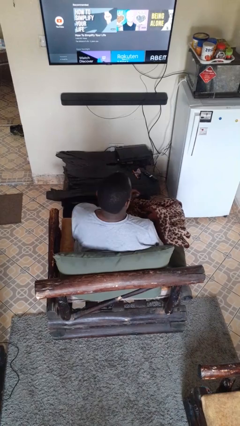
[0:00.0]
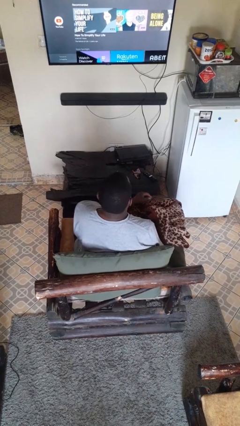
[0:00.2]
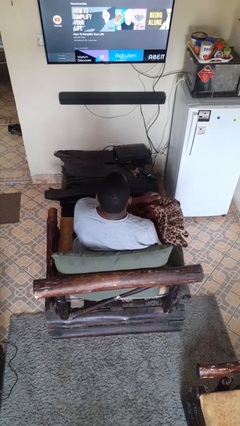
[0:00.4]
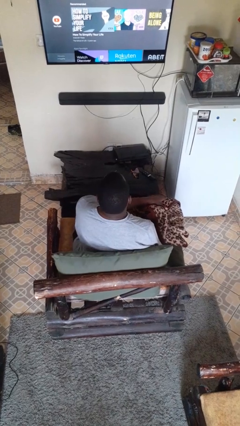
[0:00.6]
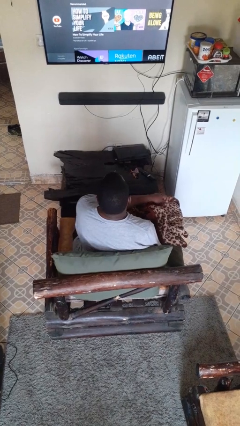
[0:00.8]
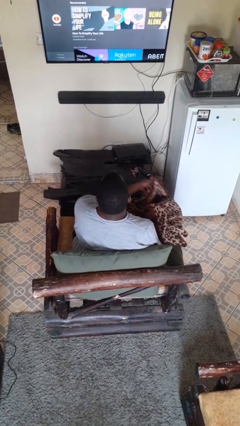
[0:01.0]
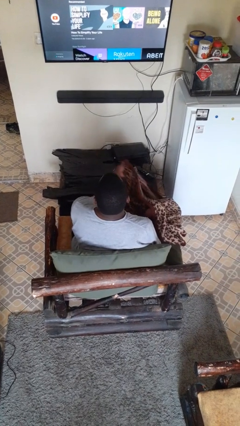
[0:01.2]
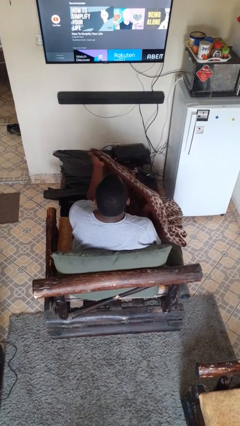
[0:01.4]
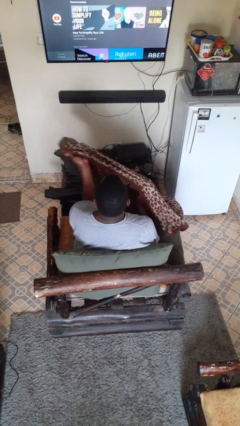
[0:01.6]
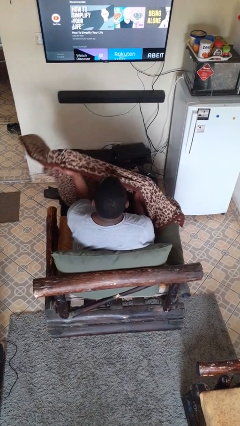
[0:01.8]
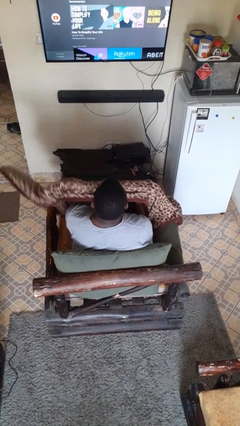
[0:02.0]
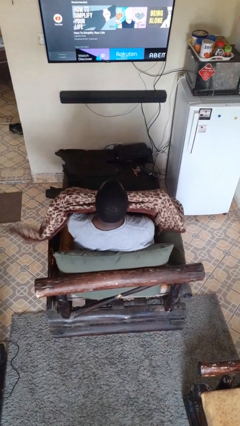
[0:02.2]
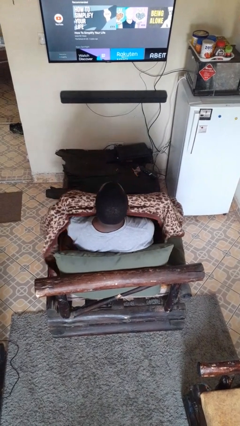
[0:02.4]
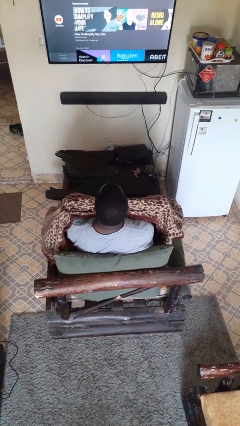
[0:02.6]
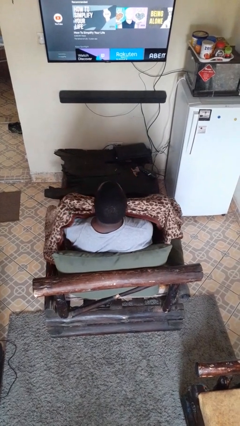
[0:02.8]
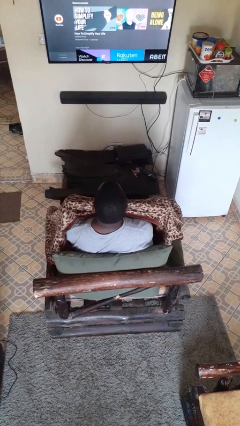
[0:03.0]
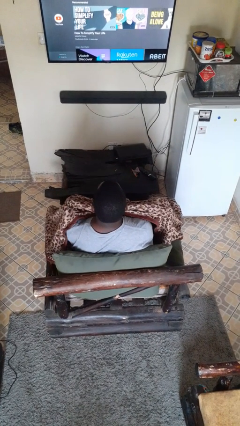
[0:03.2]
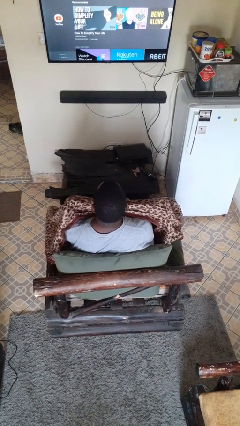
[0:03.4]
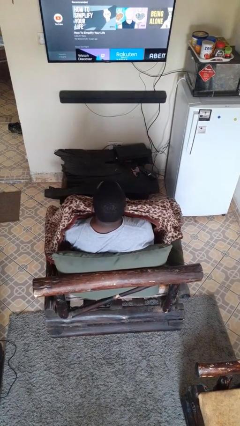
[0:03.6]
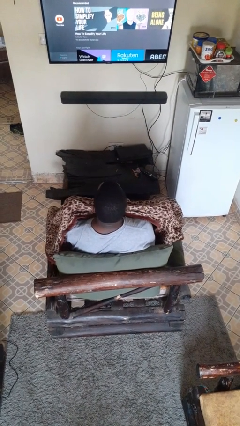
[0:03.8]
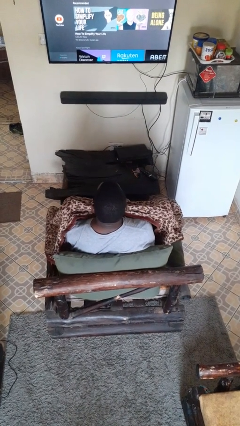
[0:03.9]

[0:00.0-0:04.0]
person covers with blanket

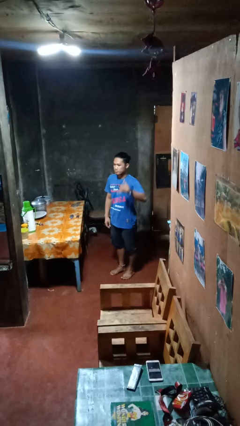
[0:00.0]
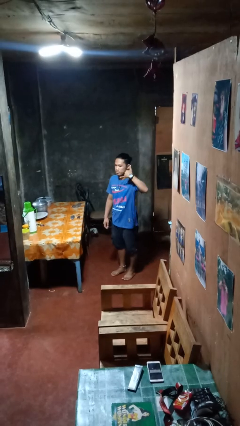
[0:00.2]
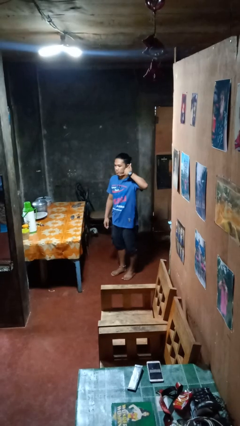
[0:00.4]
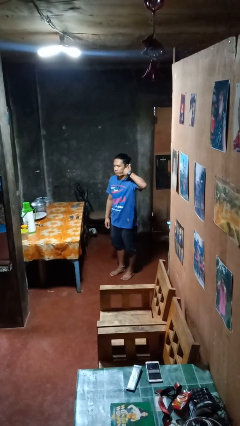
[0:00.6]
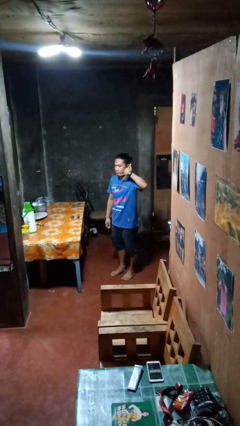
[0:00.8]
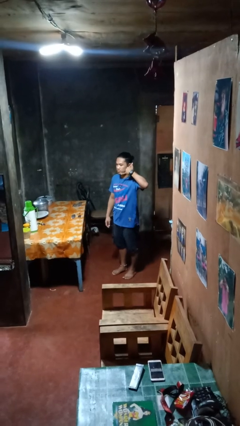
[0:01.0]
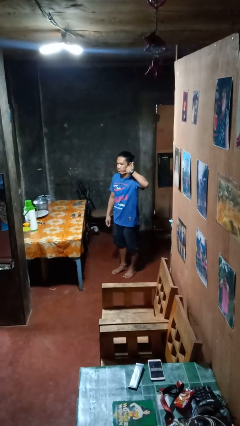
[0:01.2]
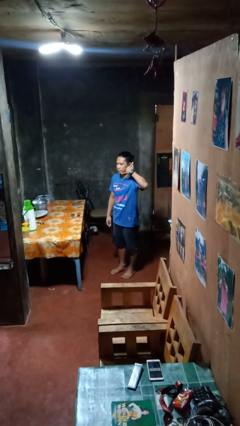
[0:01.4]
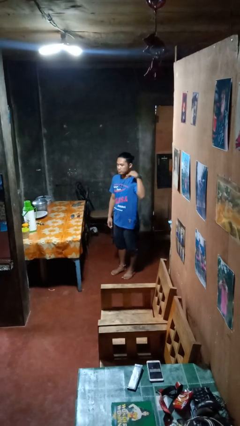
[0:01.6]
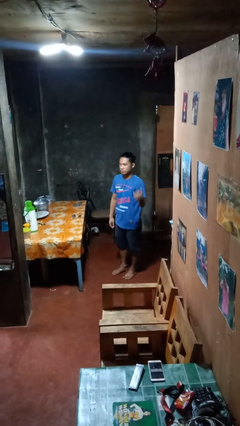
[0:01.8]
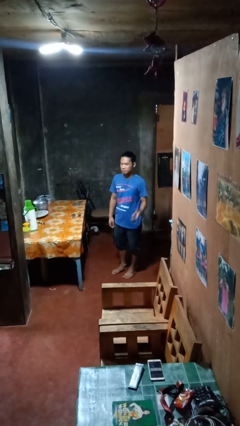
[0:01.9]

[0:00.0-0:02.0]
person gestures call me

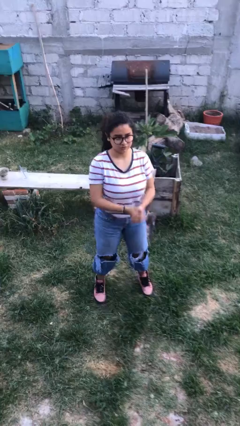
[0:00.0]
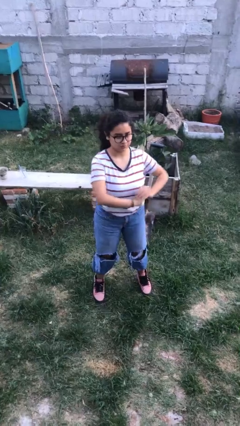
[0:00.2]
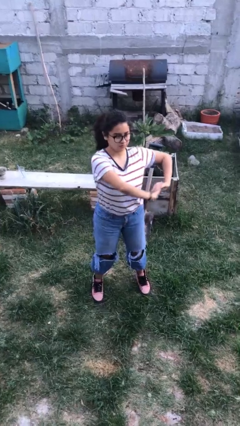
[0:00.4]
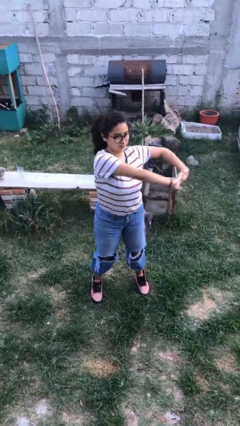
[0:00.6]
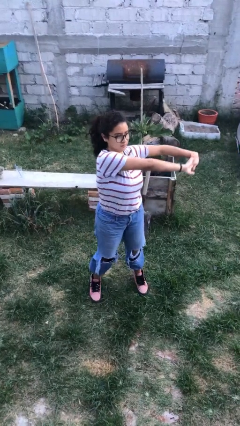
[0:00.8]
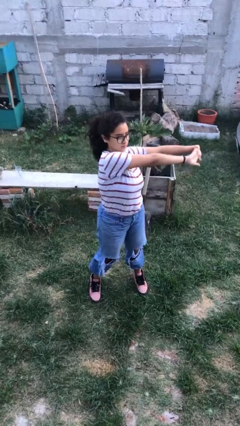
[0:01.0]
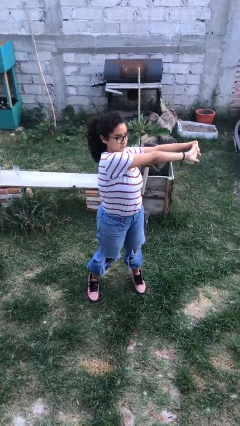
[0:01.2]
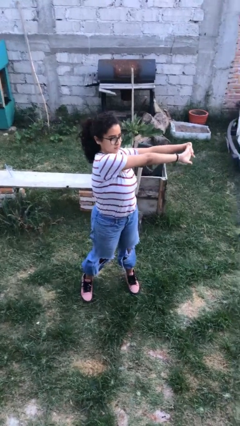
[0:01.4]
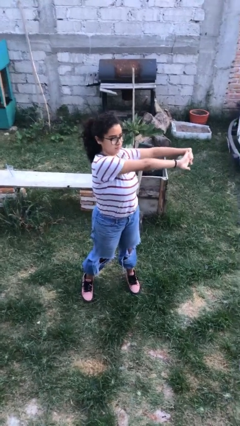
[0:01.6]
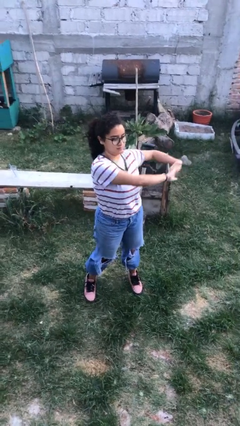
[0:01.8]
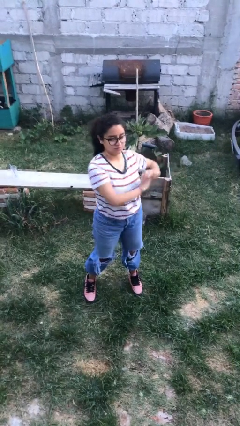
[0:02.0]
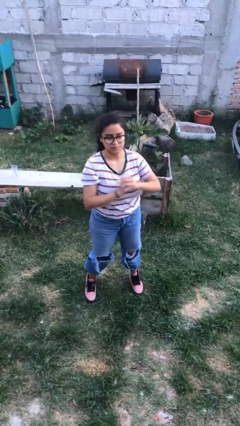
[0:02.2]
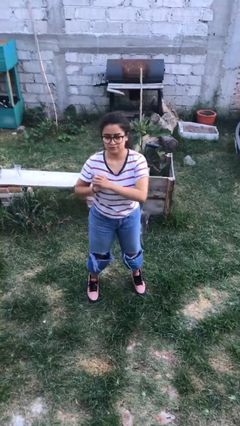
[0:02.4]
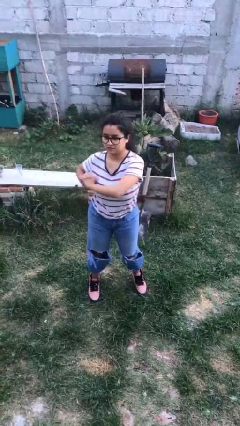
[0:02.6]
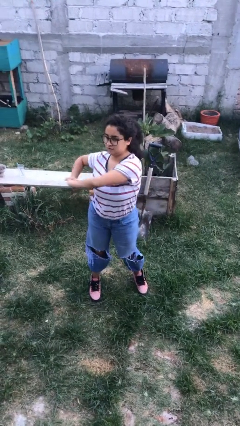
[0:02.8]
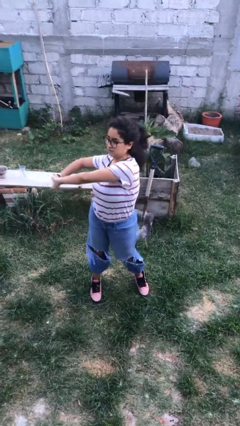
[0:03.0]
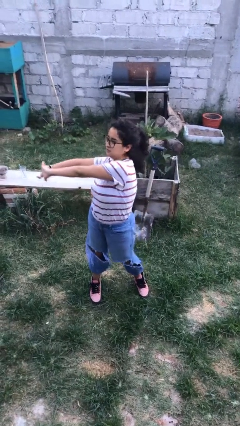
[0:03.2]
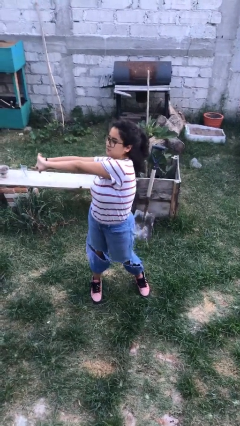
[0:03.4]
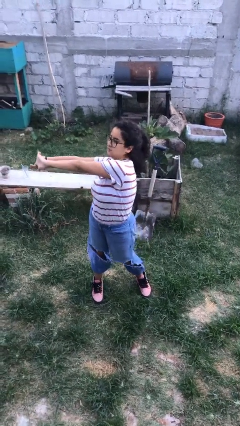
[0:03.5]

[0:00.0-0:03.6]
person stretches arms to side

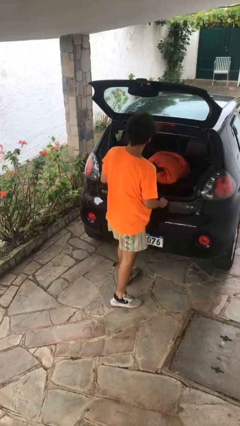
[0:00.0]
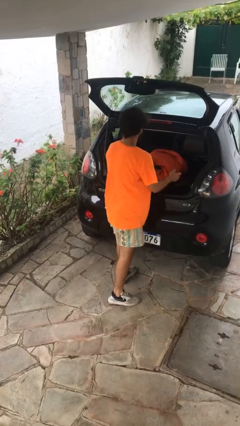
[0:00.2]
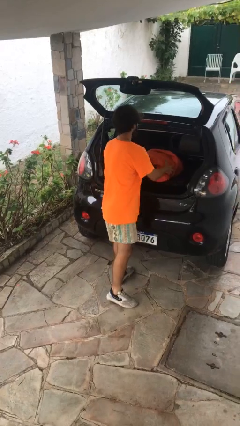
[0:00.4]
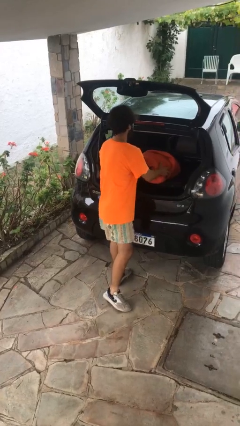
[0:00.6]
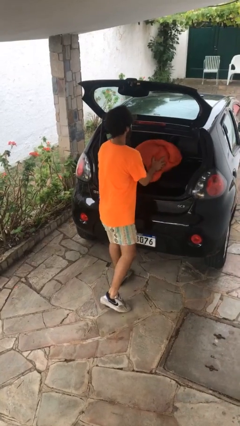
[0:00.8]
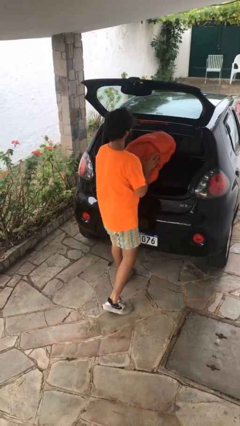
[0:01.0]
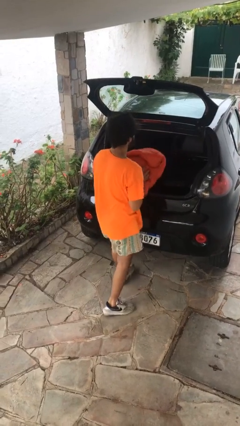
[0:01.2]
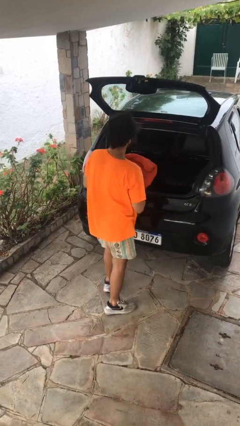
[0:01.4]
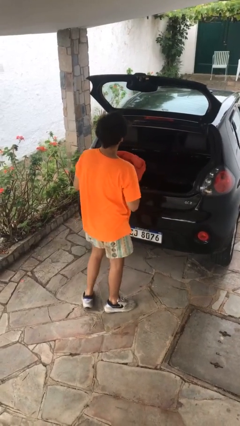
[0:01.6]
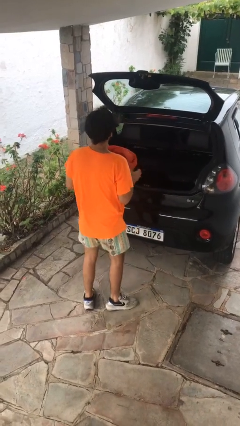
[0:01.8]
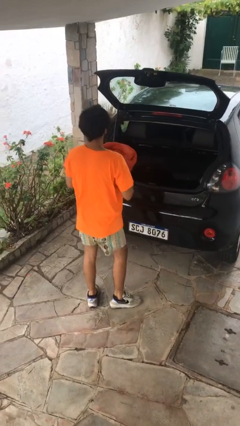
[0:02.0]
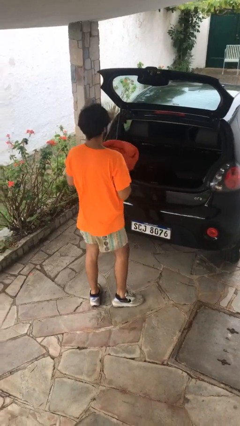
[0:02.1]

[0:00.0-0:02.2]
person unloads car

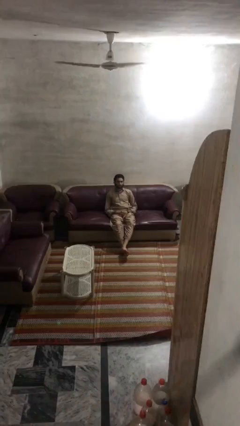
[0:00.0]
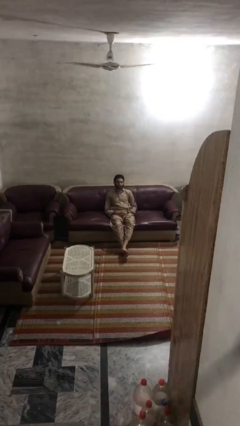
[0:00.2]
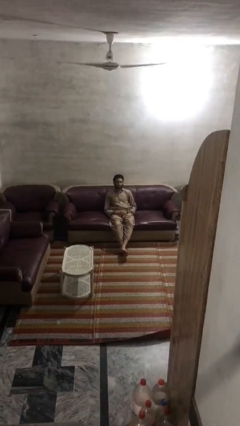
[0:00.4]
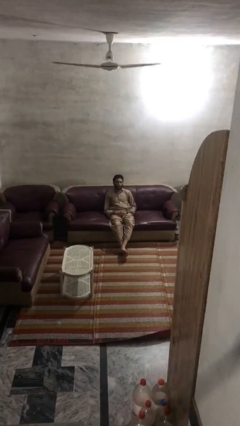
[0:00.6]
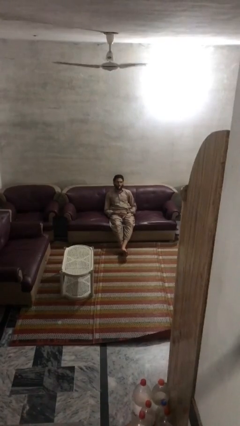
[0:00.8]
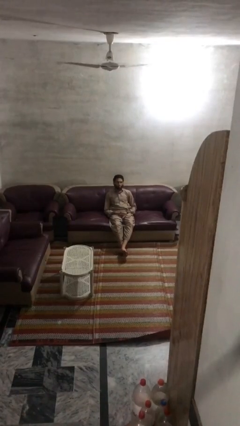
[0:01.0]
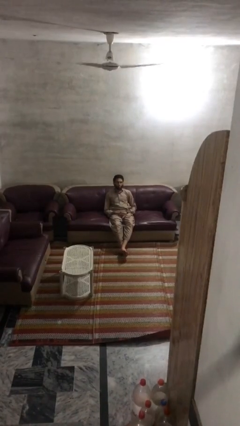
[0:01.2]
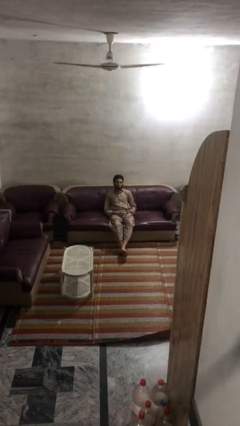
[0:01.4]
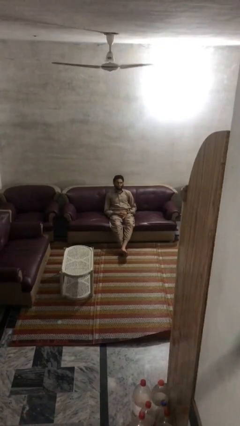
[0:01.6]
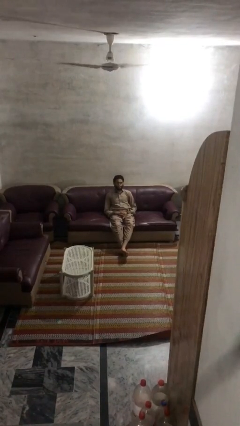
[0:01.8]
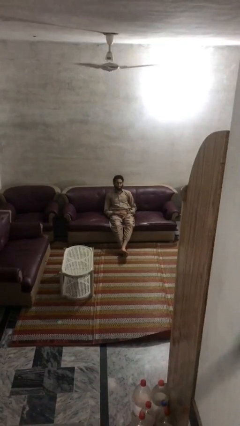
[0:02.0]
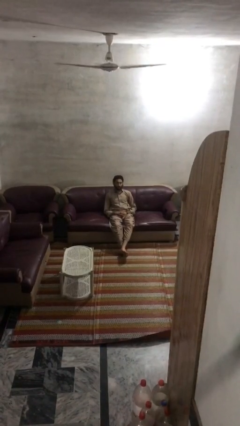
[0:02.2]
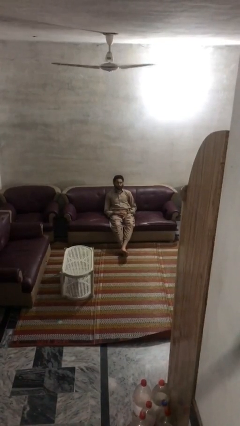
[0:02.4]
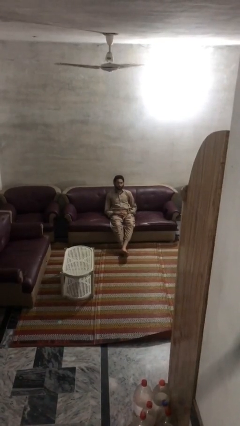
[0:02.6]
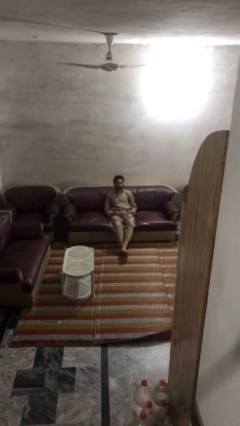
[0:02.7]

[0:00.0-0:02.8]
person sticks out tongue

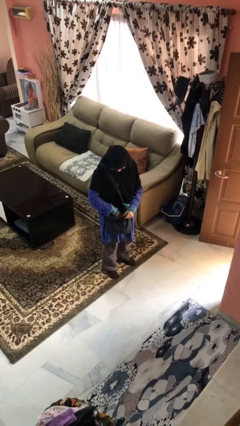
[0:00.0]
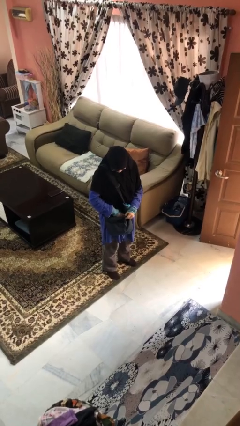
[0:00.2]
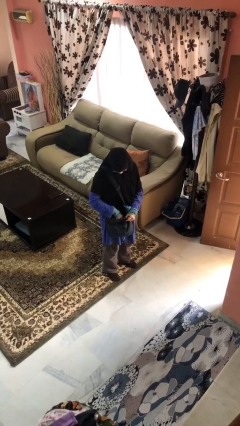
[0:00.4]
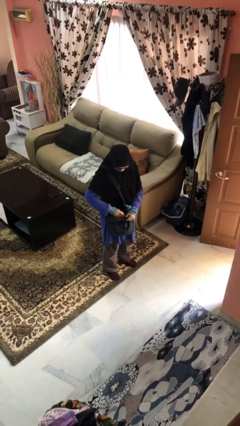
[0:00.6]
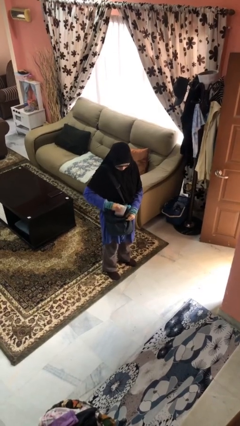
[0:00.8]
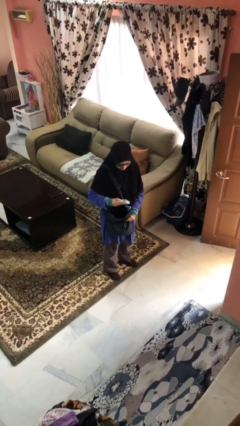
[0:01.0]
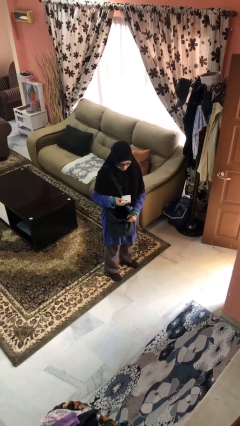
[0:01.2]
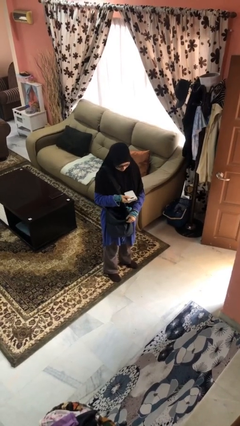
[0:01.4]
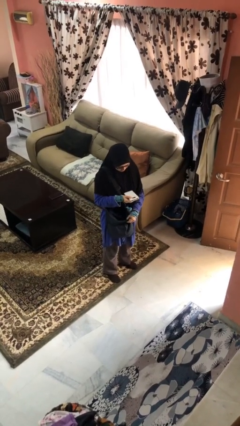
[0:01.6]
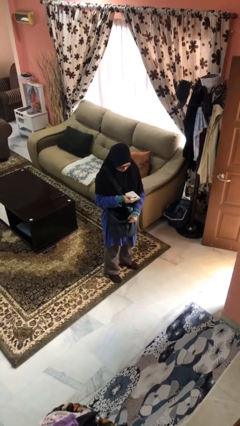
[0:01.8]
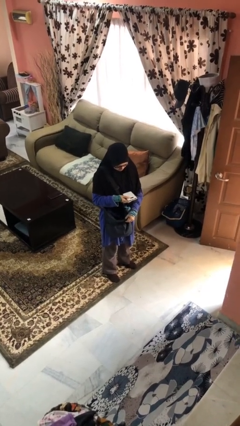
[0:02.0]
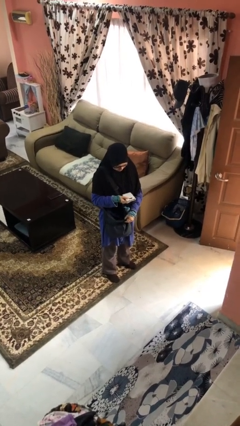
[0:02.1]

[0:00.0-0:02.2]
person takes object from purse

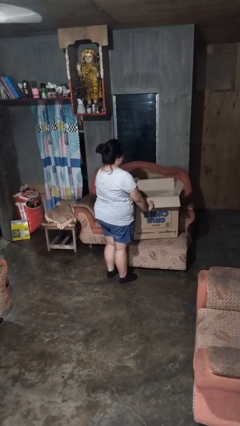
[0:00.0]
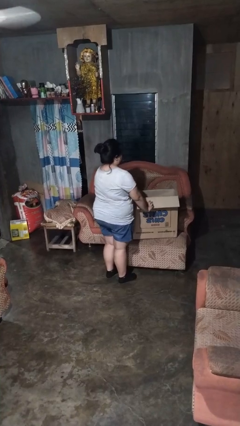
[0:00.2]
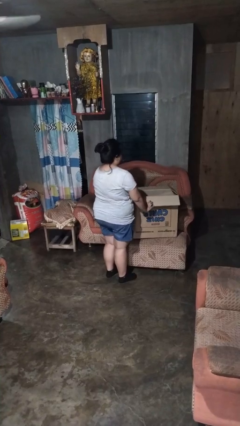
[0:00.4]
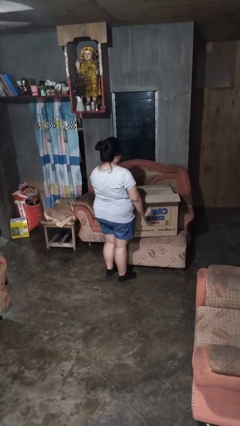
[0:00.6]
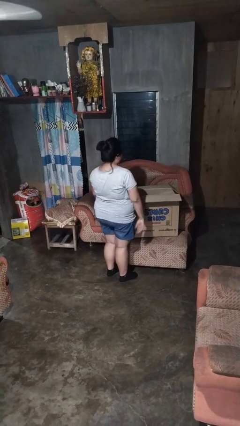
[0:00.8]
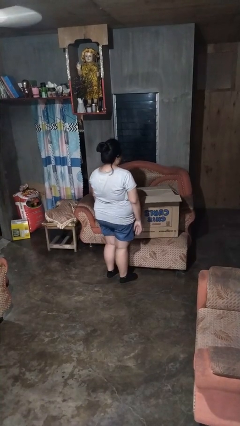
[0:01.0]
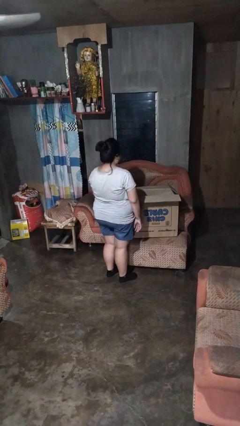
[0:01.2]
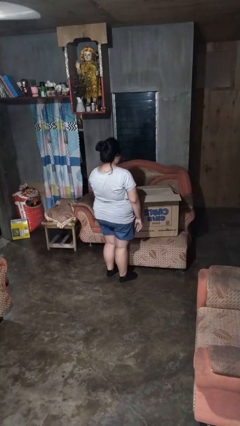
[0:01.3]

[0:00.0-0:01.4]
person closes box
